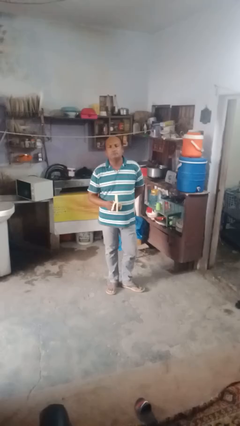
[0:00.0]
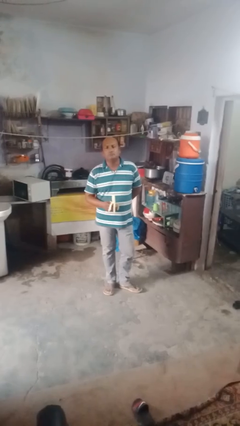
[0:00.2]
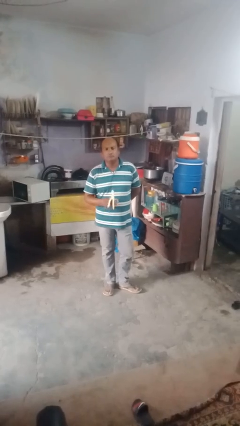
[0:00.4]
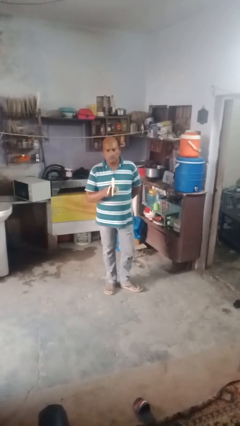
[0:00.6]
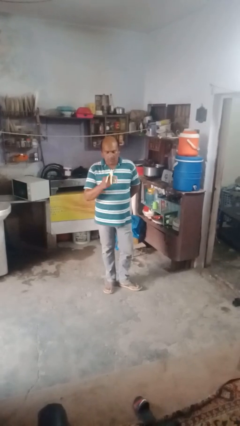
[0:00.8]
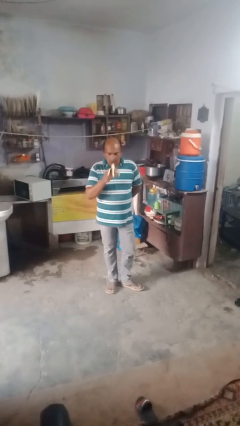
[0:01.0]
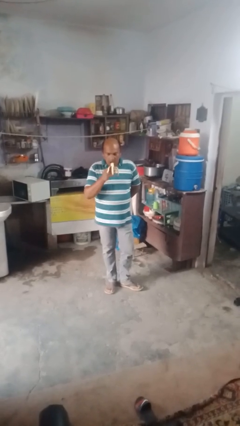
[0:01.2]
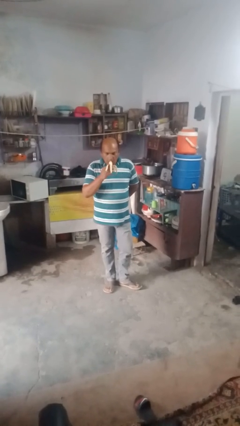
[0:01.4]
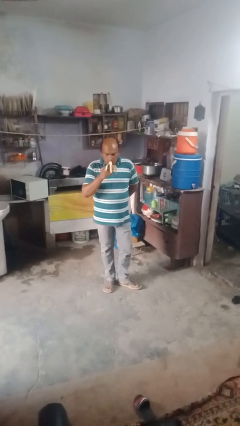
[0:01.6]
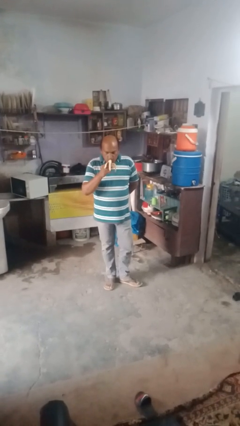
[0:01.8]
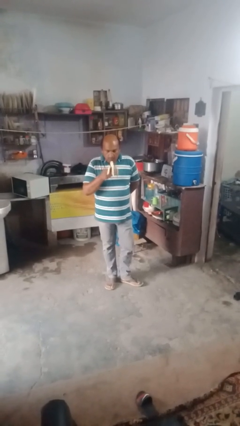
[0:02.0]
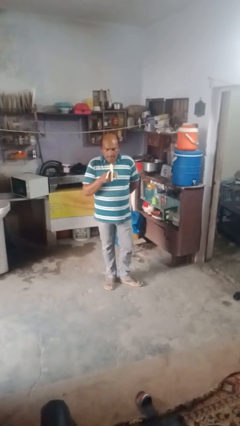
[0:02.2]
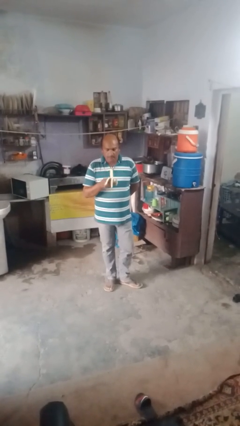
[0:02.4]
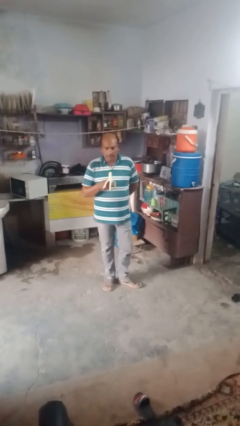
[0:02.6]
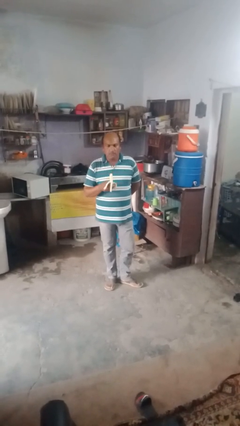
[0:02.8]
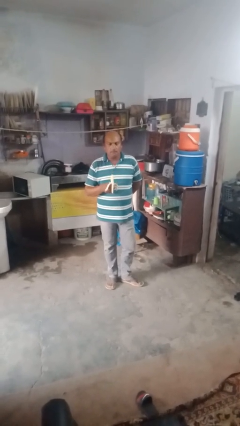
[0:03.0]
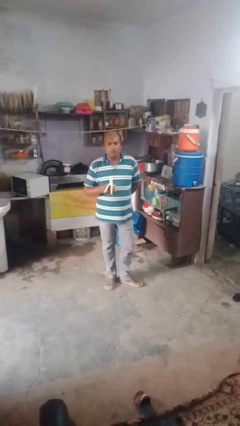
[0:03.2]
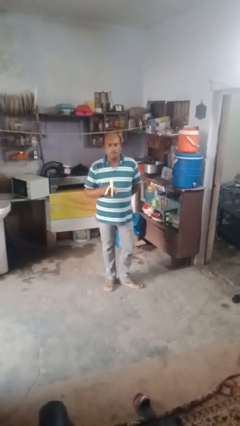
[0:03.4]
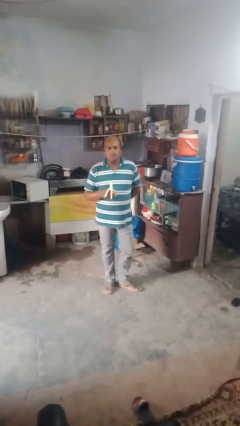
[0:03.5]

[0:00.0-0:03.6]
person eats banana

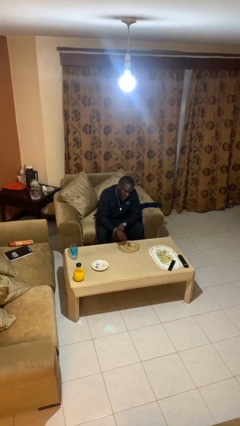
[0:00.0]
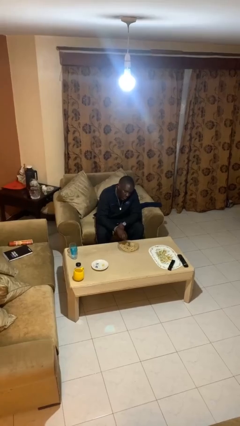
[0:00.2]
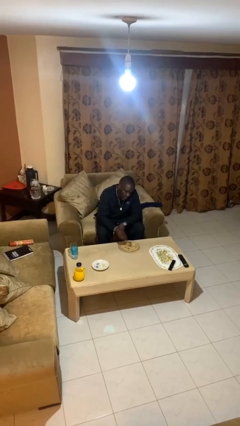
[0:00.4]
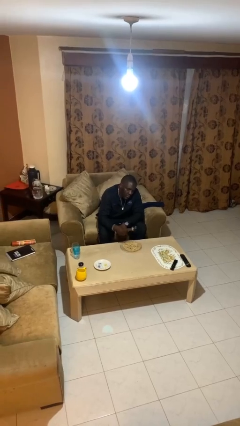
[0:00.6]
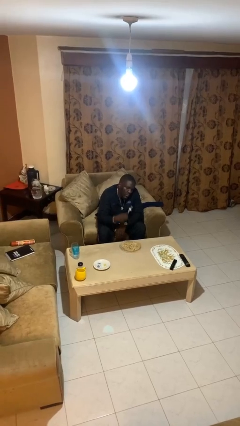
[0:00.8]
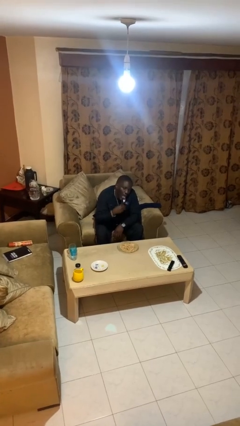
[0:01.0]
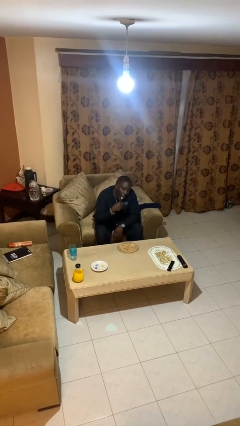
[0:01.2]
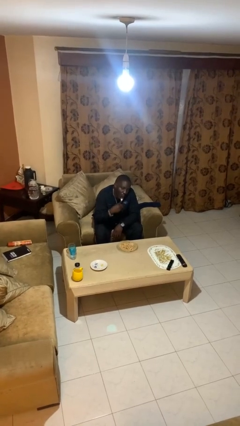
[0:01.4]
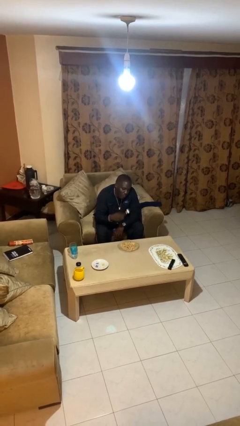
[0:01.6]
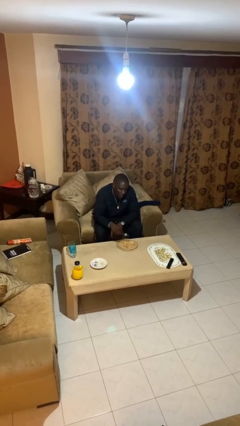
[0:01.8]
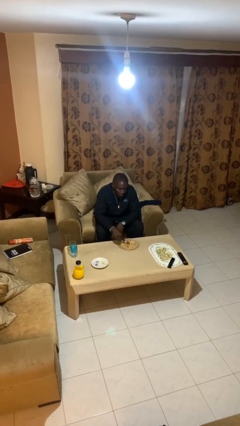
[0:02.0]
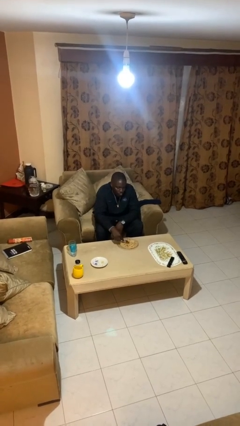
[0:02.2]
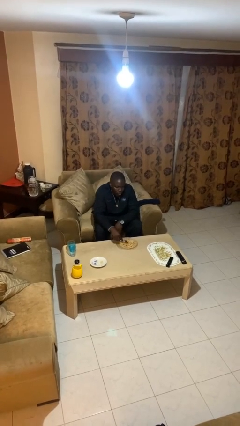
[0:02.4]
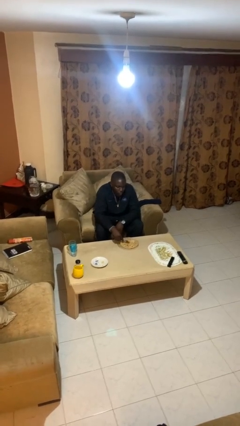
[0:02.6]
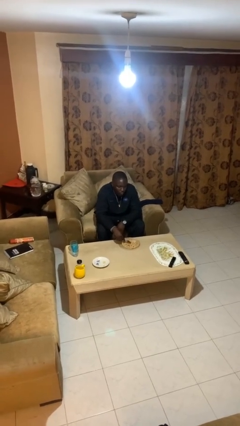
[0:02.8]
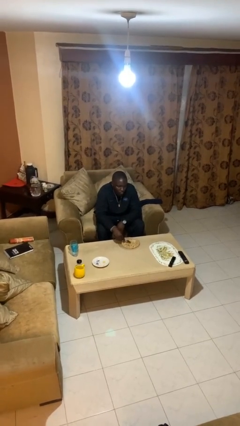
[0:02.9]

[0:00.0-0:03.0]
person eats with utensil

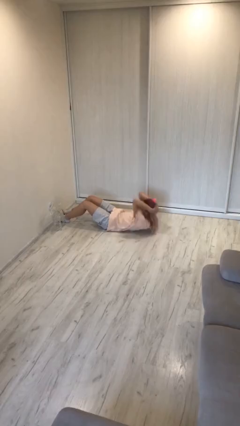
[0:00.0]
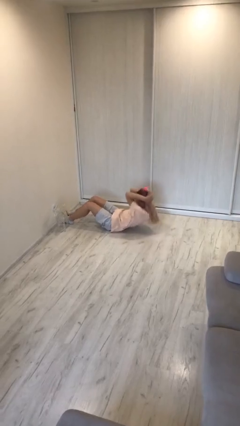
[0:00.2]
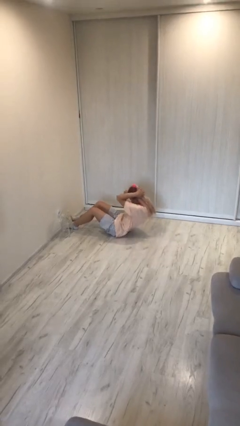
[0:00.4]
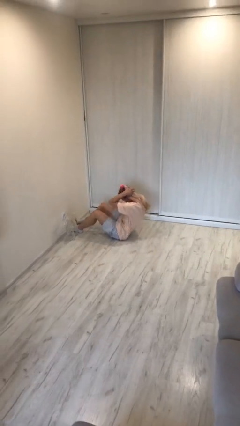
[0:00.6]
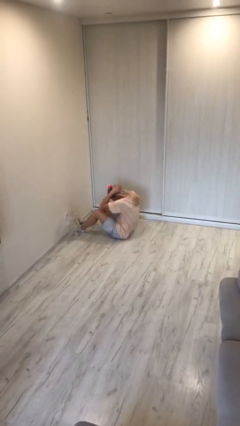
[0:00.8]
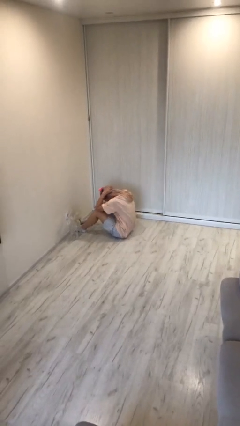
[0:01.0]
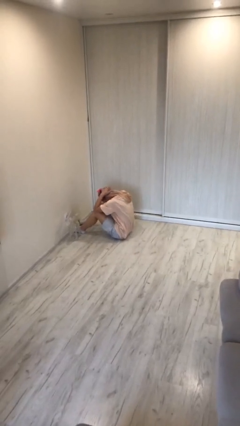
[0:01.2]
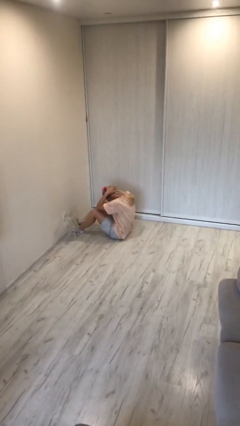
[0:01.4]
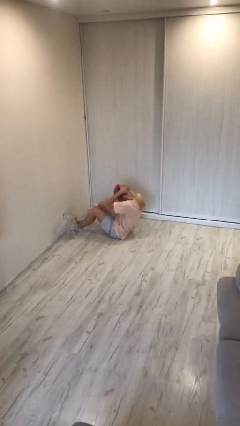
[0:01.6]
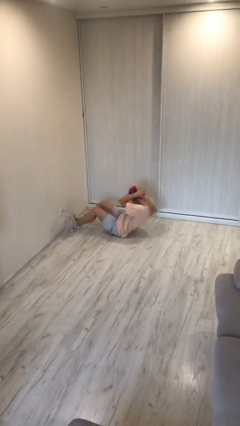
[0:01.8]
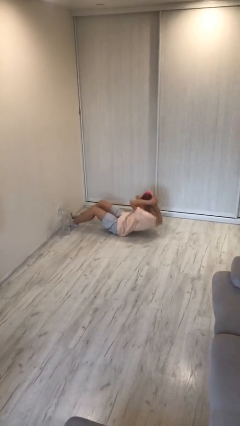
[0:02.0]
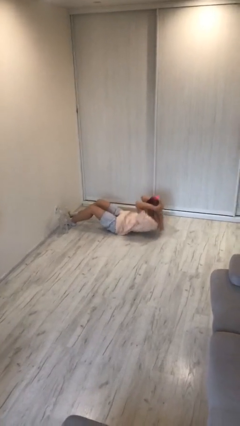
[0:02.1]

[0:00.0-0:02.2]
person exercises with situp

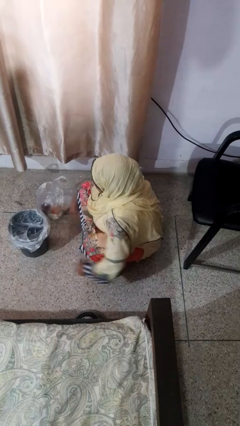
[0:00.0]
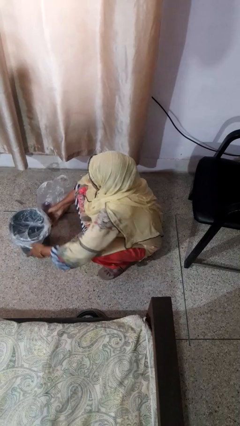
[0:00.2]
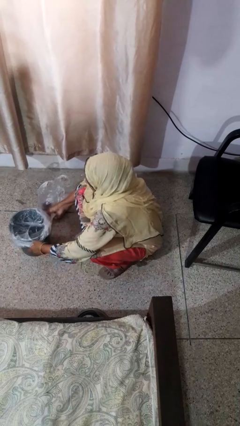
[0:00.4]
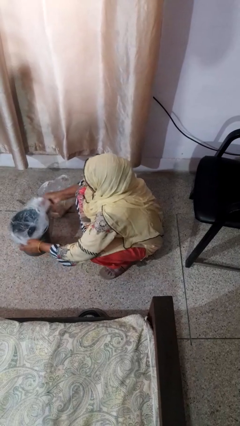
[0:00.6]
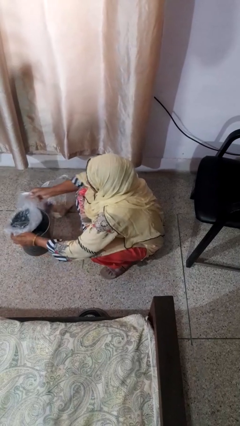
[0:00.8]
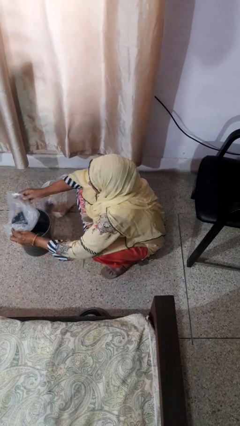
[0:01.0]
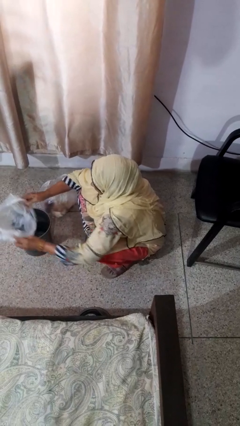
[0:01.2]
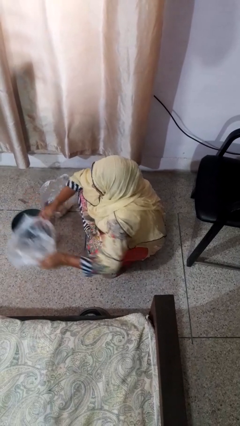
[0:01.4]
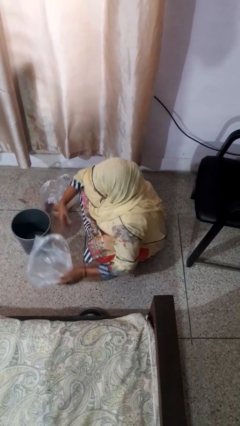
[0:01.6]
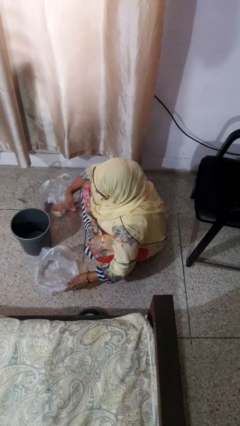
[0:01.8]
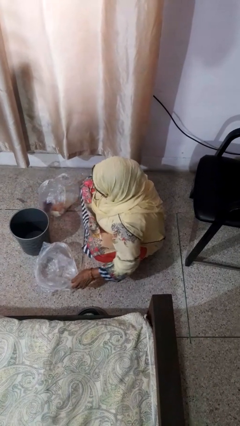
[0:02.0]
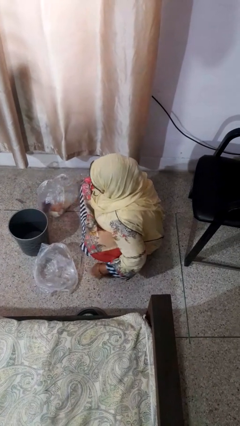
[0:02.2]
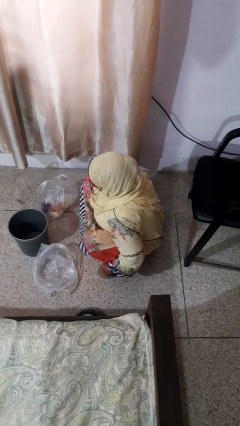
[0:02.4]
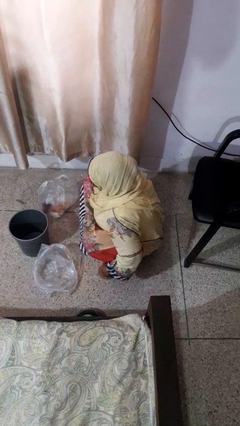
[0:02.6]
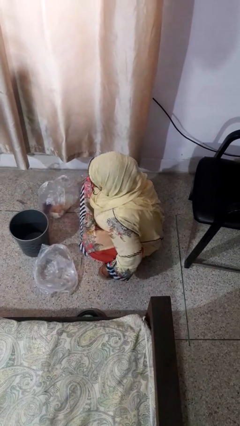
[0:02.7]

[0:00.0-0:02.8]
person removes trashbag from trashcan

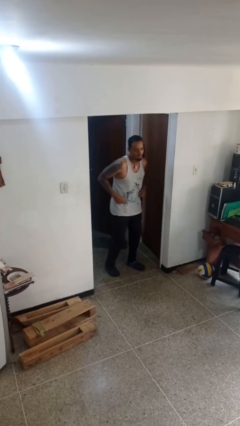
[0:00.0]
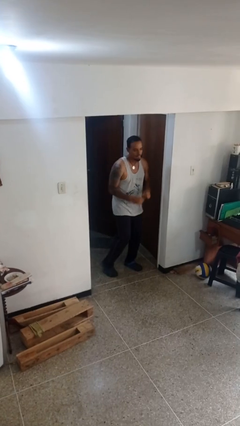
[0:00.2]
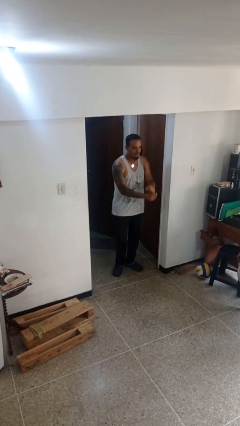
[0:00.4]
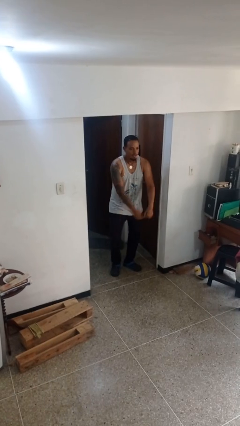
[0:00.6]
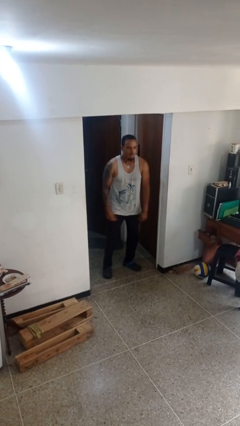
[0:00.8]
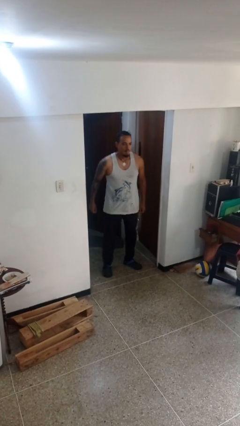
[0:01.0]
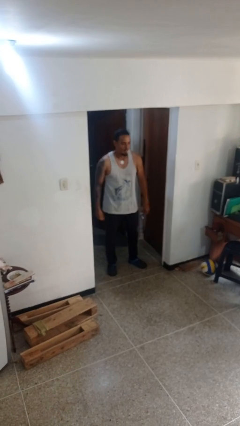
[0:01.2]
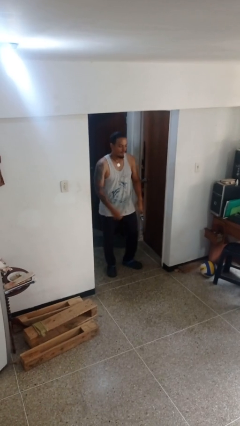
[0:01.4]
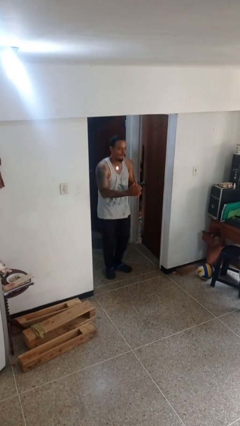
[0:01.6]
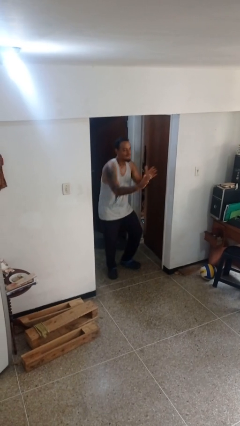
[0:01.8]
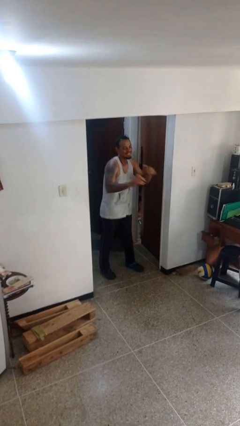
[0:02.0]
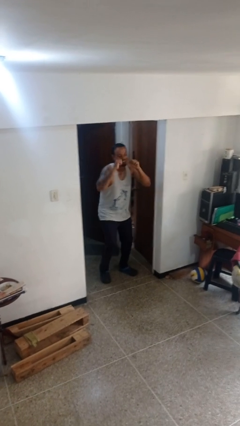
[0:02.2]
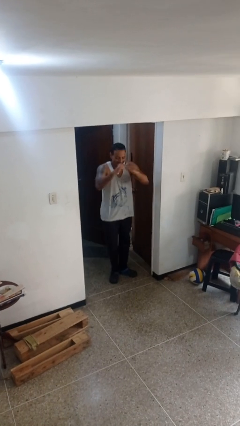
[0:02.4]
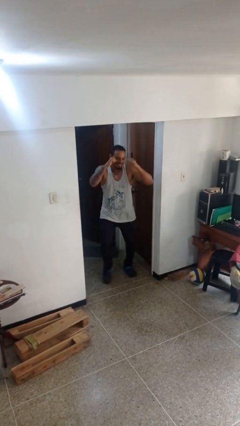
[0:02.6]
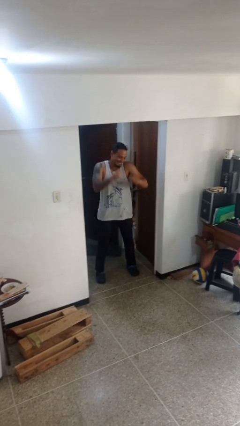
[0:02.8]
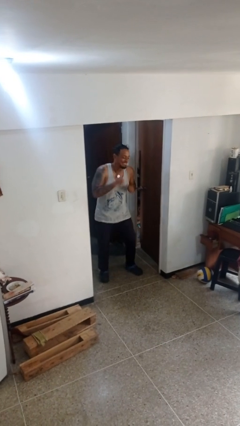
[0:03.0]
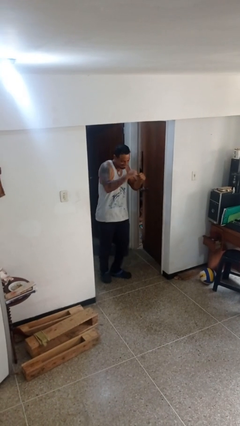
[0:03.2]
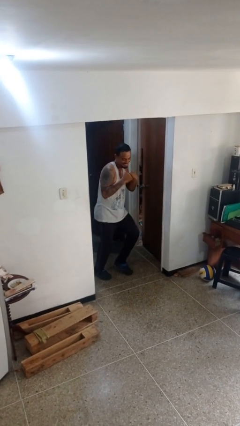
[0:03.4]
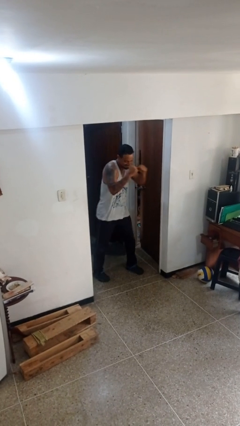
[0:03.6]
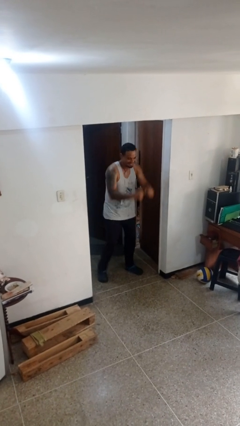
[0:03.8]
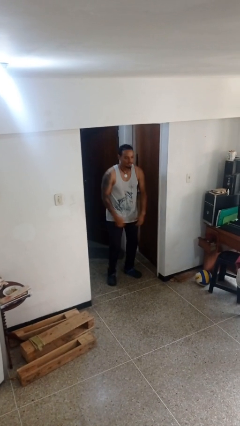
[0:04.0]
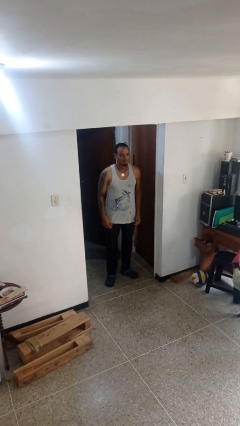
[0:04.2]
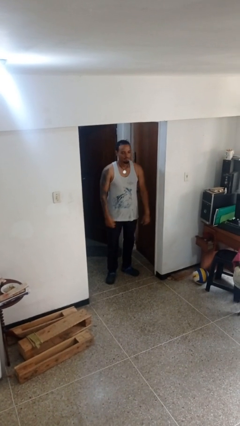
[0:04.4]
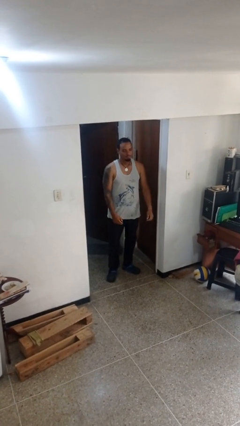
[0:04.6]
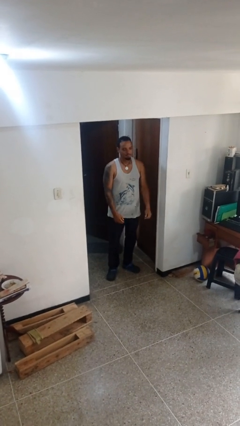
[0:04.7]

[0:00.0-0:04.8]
person dances in place

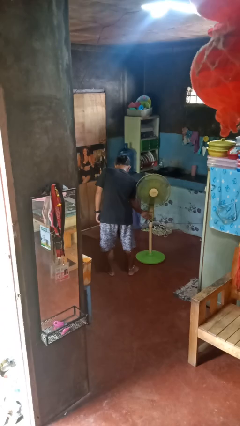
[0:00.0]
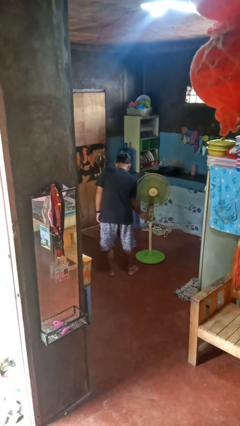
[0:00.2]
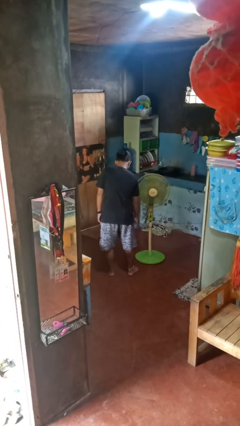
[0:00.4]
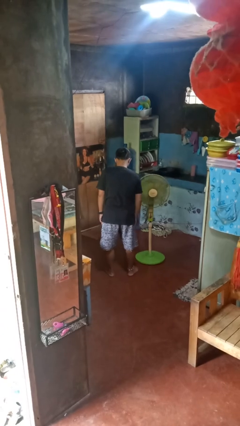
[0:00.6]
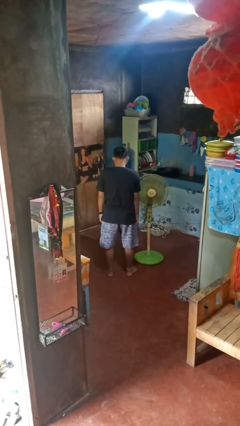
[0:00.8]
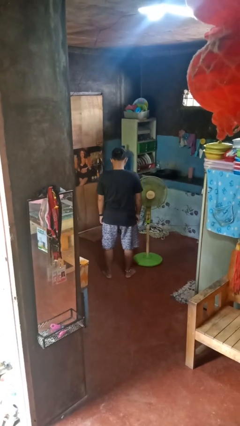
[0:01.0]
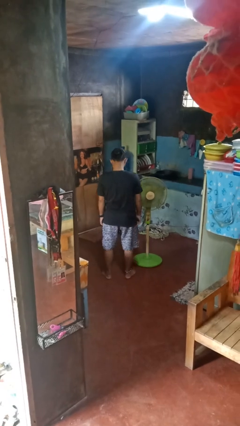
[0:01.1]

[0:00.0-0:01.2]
person turns off fan
